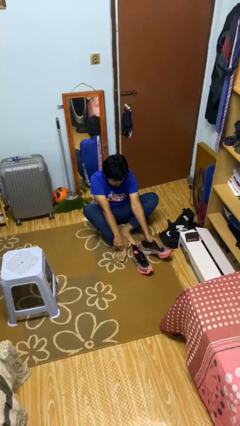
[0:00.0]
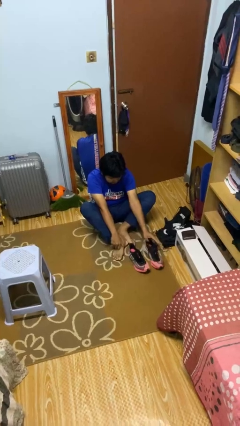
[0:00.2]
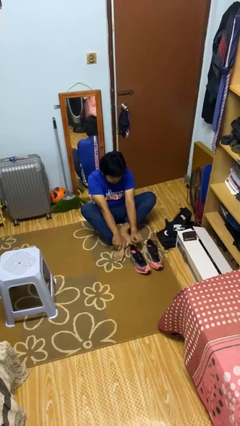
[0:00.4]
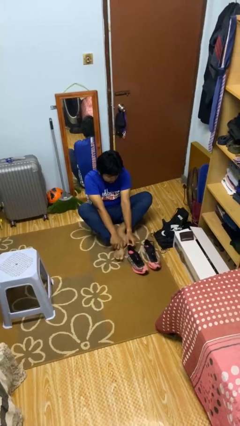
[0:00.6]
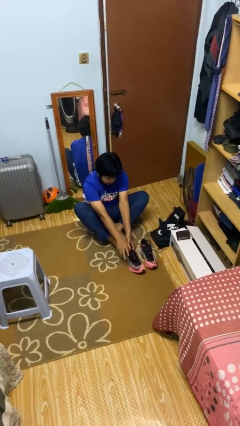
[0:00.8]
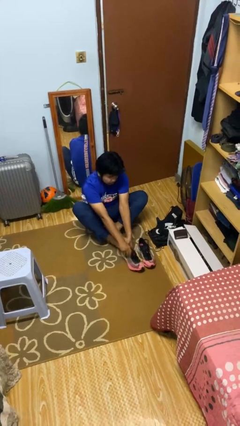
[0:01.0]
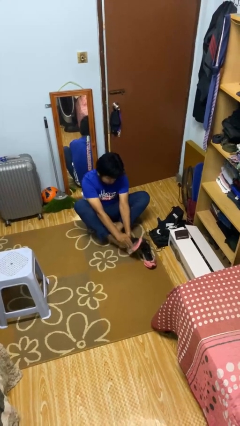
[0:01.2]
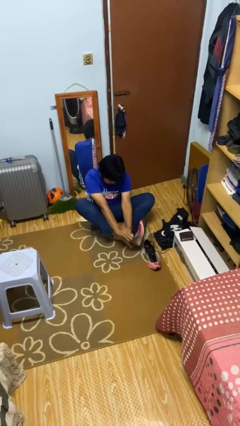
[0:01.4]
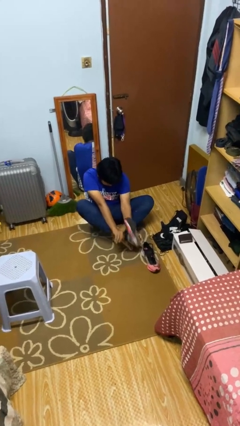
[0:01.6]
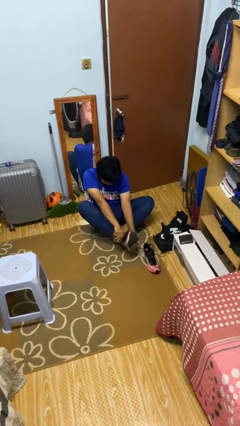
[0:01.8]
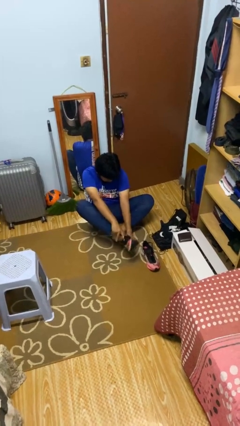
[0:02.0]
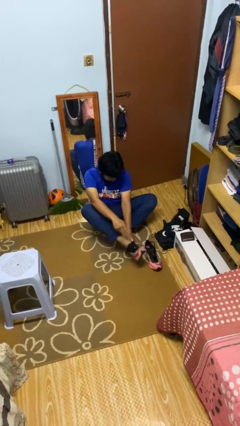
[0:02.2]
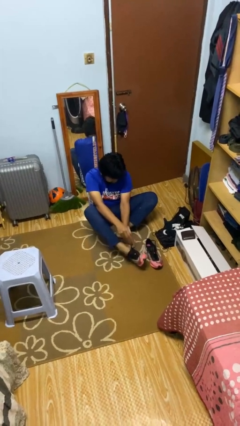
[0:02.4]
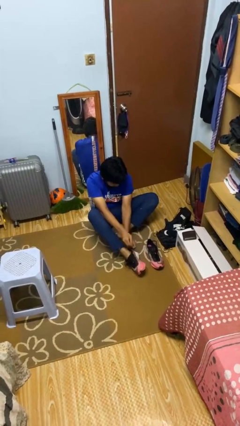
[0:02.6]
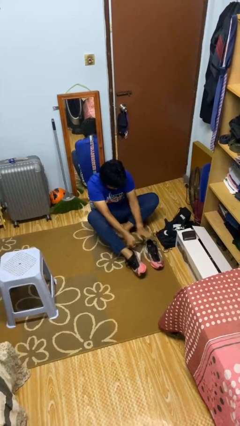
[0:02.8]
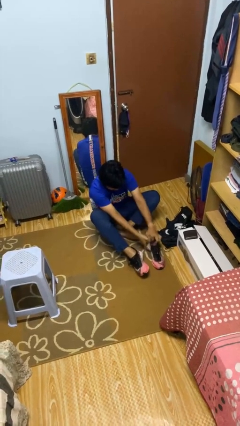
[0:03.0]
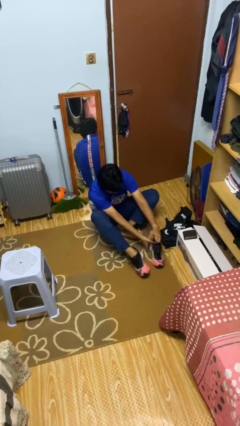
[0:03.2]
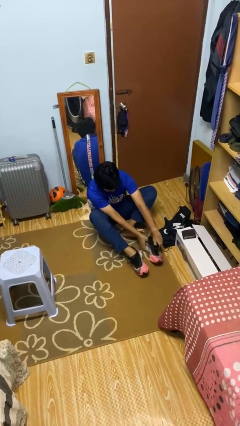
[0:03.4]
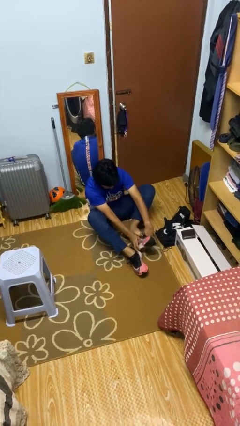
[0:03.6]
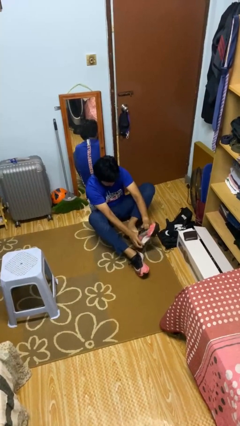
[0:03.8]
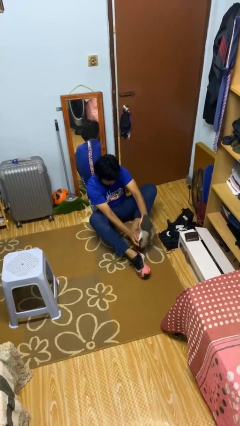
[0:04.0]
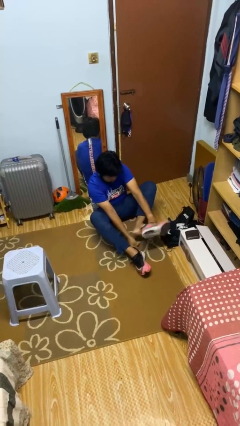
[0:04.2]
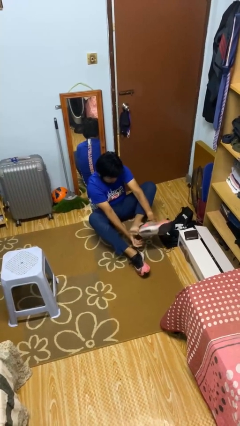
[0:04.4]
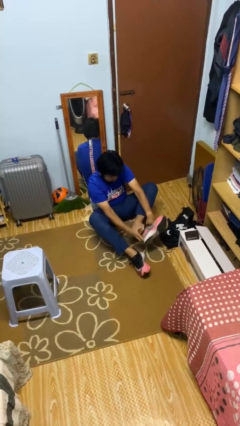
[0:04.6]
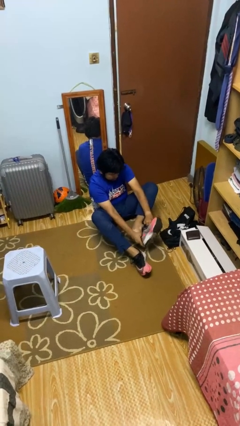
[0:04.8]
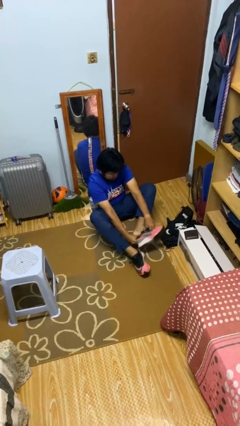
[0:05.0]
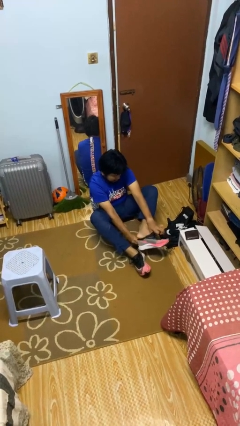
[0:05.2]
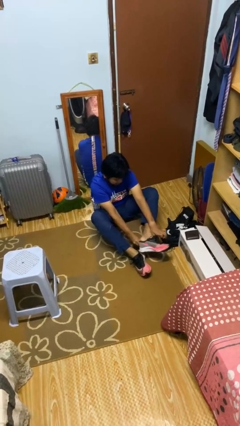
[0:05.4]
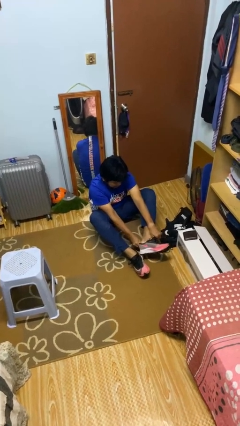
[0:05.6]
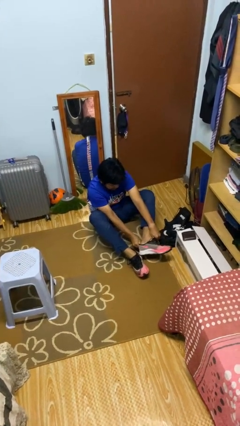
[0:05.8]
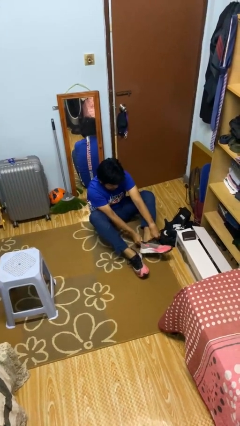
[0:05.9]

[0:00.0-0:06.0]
person puts on shoes

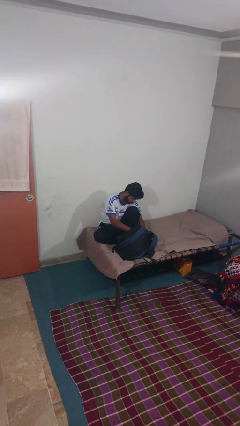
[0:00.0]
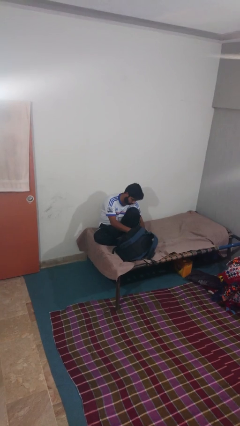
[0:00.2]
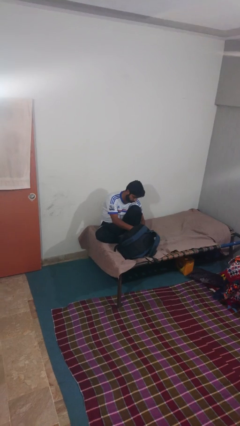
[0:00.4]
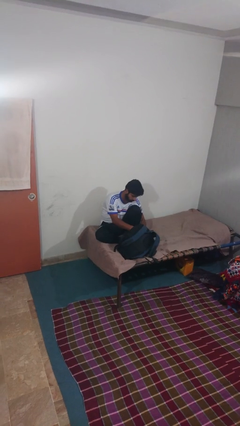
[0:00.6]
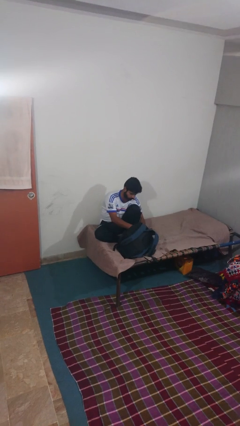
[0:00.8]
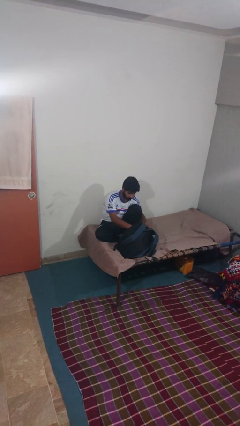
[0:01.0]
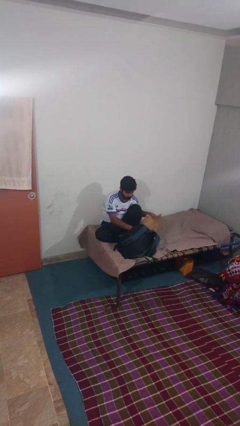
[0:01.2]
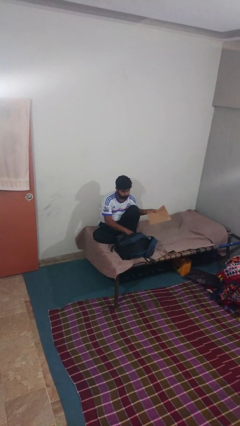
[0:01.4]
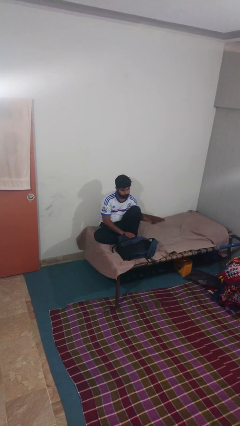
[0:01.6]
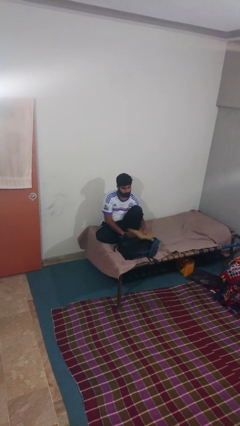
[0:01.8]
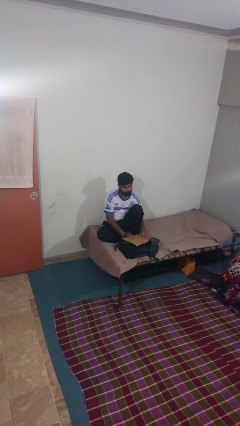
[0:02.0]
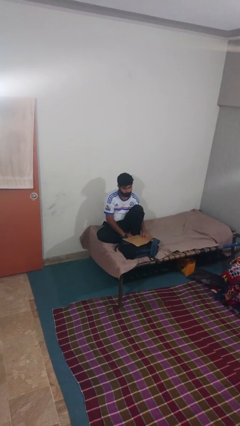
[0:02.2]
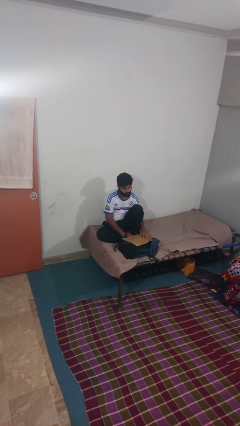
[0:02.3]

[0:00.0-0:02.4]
person takes object from backpack

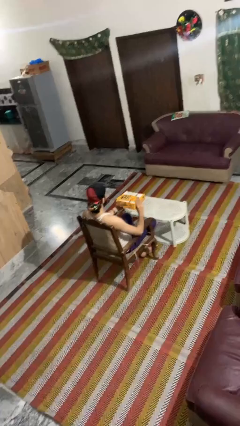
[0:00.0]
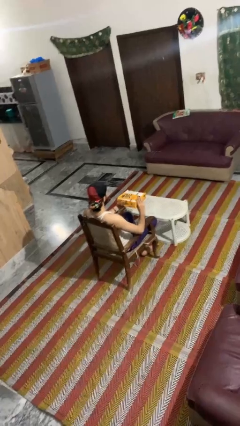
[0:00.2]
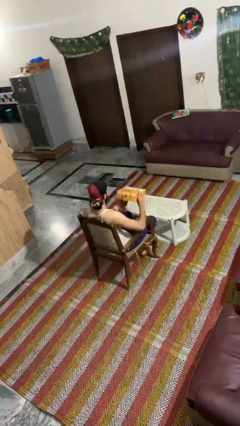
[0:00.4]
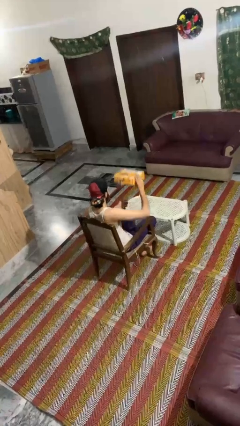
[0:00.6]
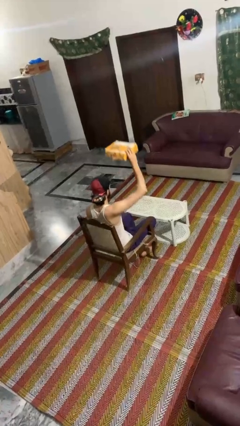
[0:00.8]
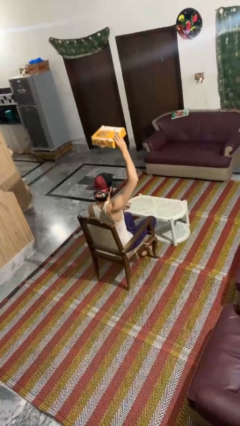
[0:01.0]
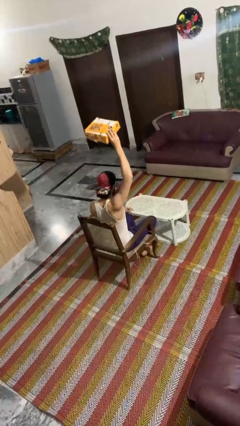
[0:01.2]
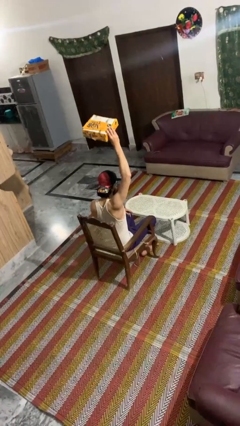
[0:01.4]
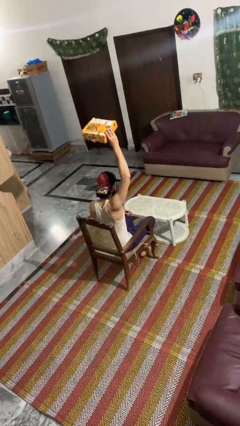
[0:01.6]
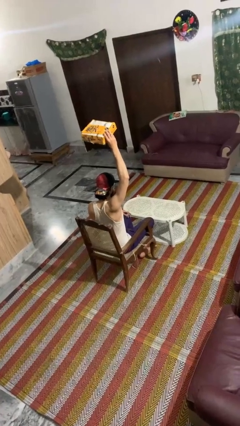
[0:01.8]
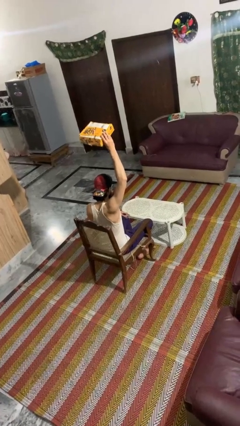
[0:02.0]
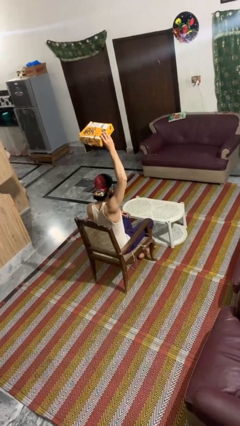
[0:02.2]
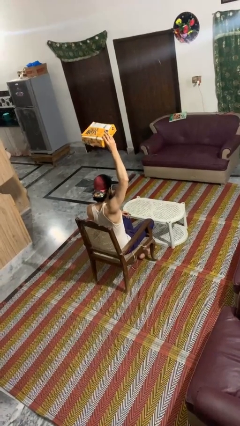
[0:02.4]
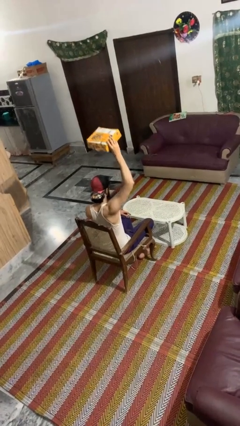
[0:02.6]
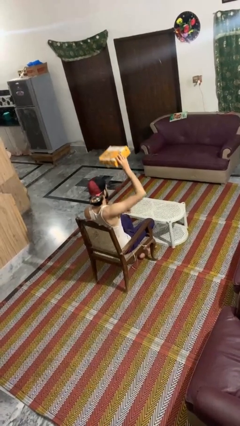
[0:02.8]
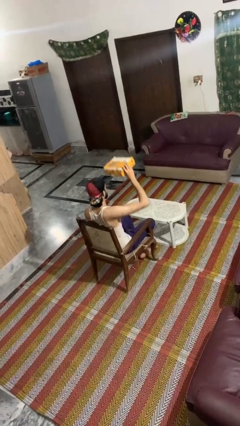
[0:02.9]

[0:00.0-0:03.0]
person holds object above head

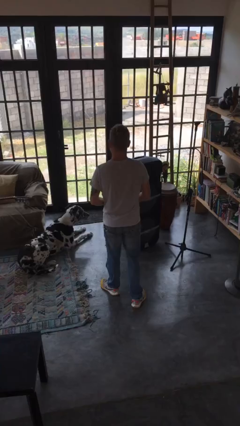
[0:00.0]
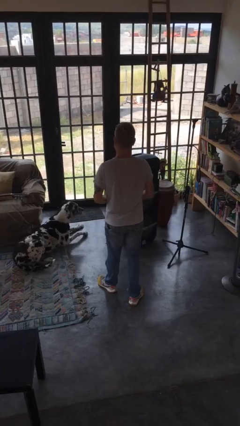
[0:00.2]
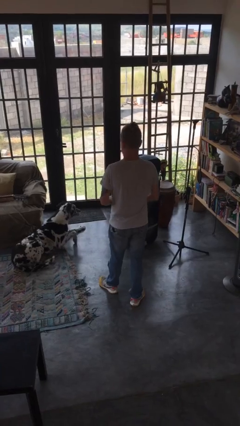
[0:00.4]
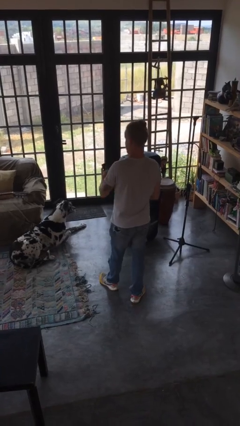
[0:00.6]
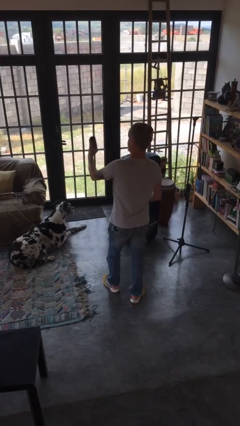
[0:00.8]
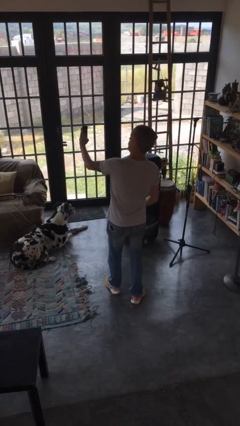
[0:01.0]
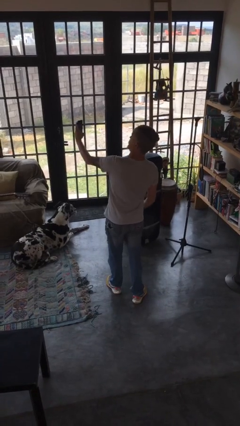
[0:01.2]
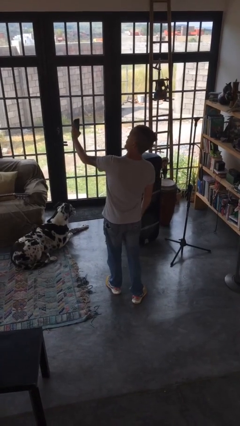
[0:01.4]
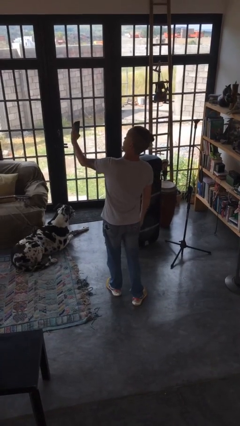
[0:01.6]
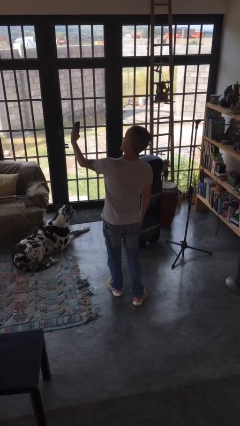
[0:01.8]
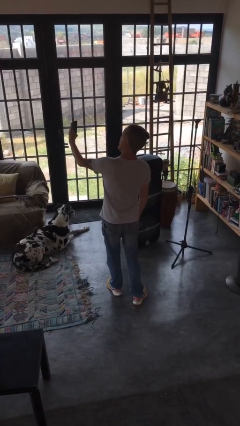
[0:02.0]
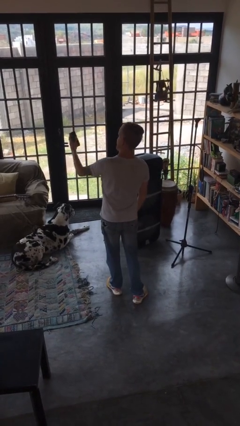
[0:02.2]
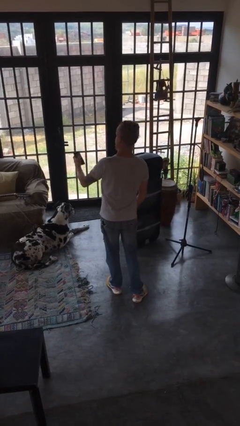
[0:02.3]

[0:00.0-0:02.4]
person takes selfie

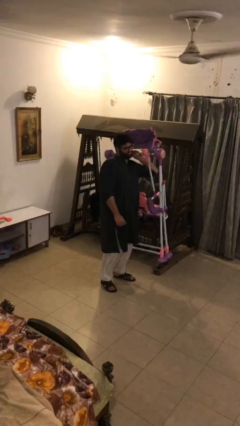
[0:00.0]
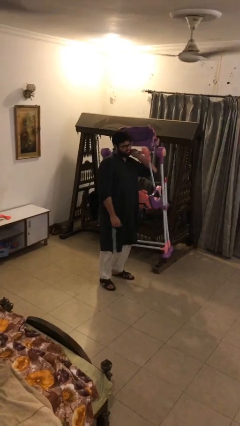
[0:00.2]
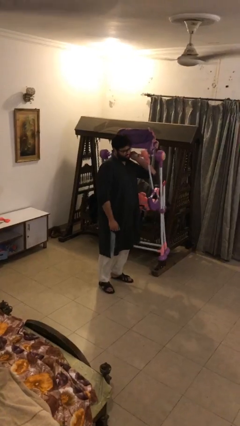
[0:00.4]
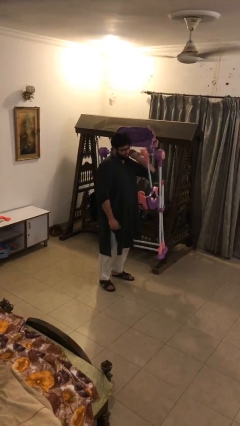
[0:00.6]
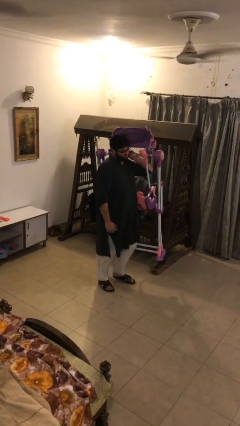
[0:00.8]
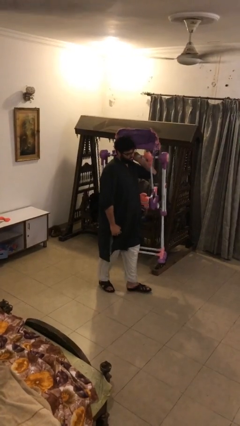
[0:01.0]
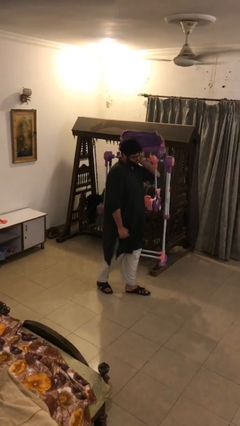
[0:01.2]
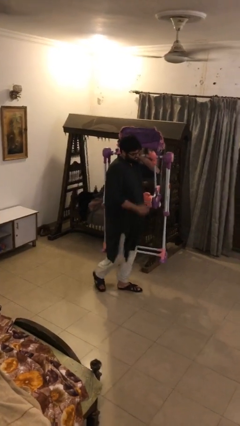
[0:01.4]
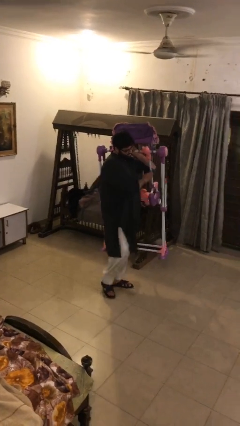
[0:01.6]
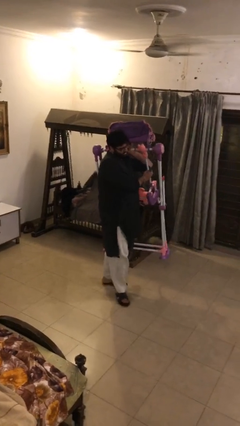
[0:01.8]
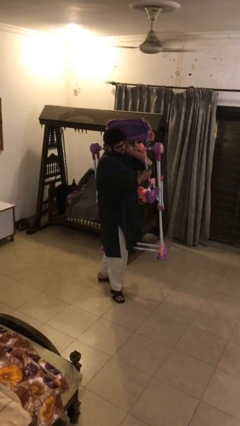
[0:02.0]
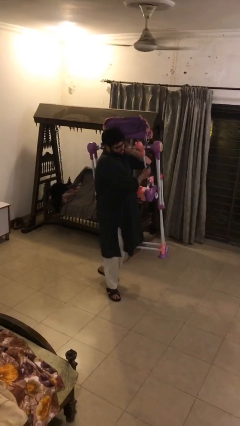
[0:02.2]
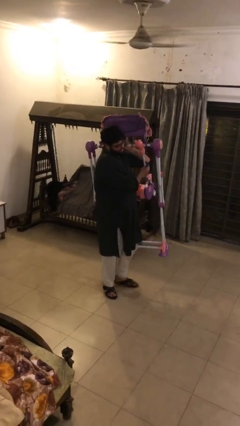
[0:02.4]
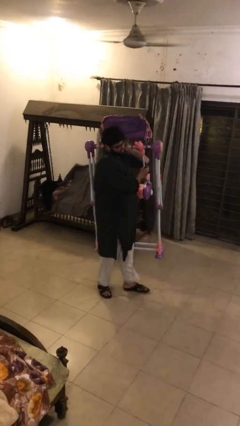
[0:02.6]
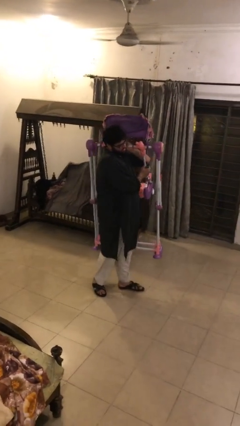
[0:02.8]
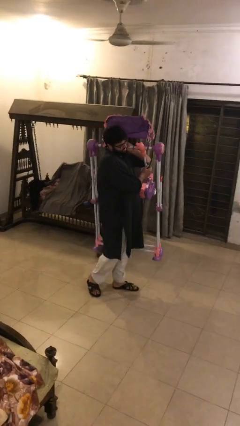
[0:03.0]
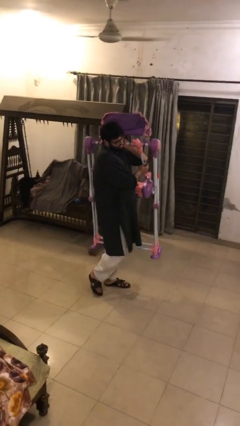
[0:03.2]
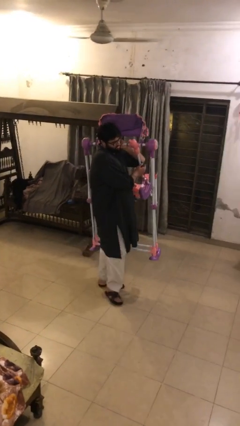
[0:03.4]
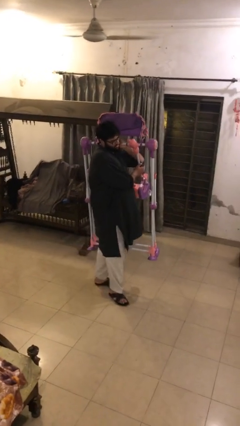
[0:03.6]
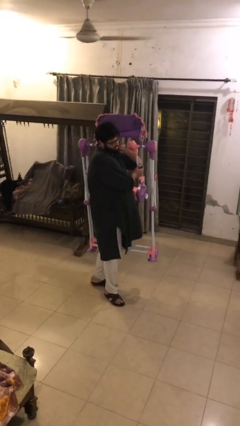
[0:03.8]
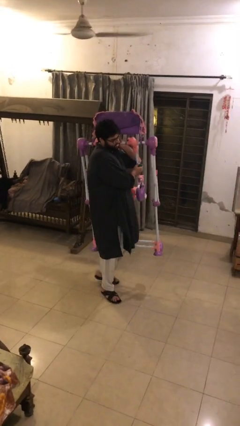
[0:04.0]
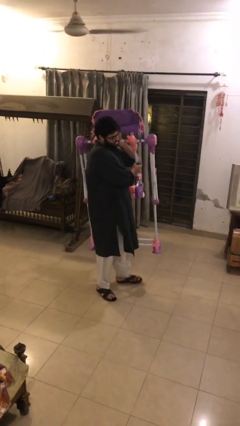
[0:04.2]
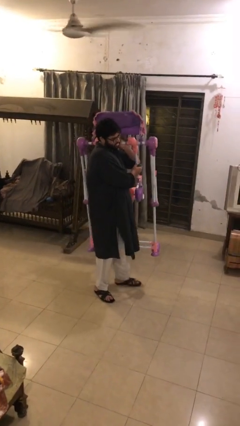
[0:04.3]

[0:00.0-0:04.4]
person carries heavy object
